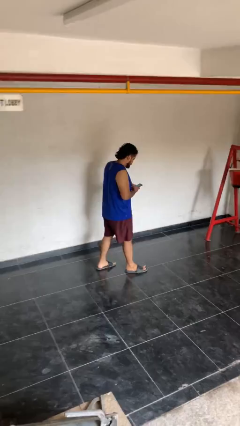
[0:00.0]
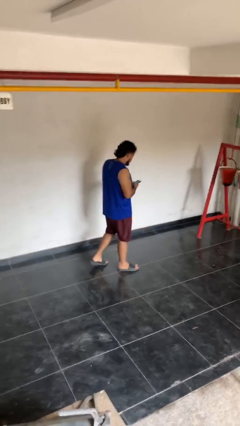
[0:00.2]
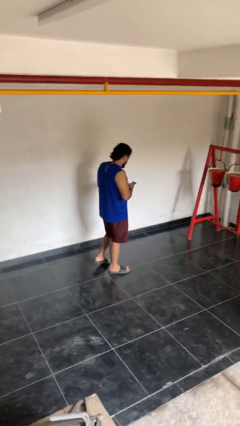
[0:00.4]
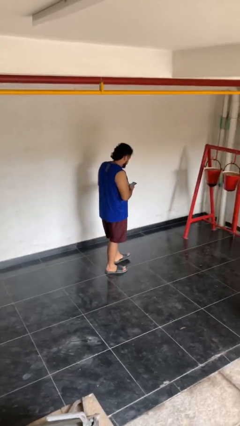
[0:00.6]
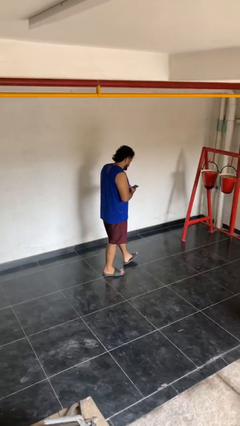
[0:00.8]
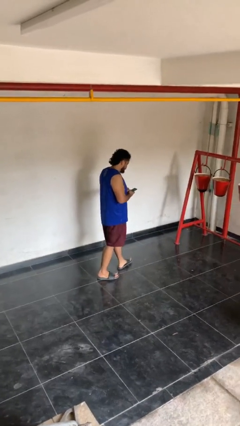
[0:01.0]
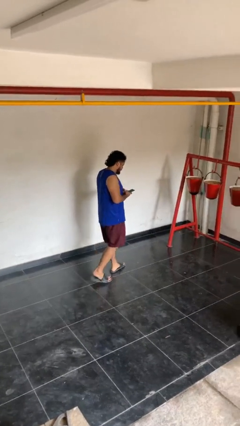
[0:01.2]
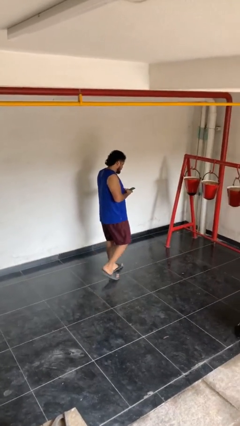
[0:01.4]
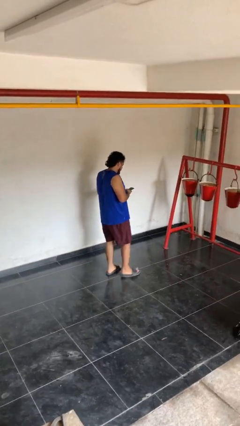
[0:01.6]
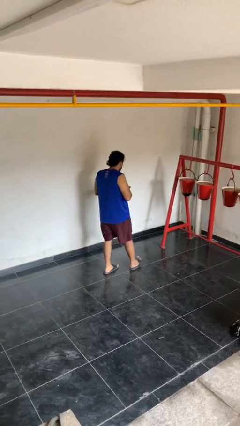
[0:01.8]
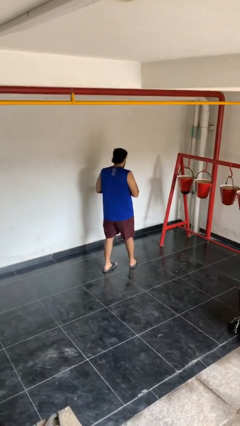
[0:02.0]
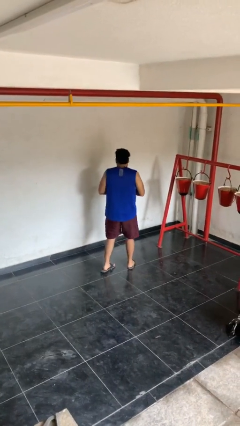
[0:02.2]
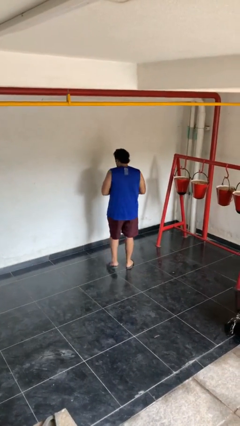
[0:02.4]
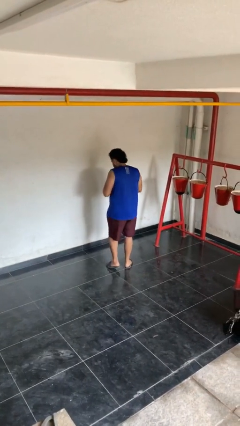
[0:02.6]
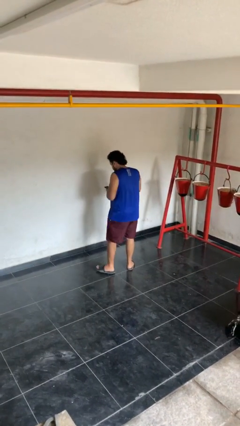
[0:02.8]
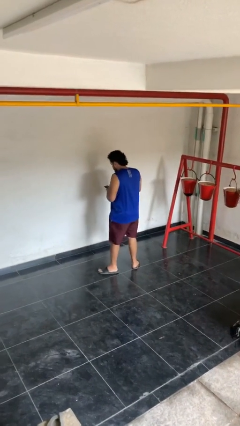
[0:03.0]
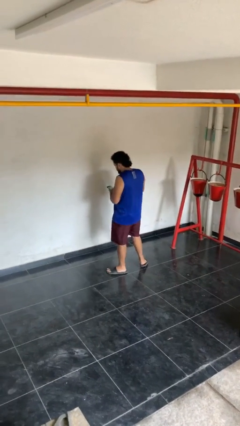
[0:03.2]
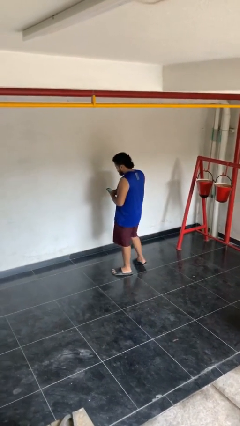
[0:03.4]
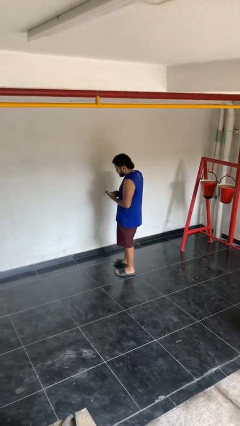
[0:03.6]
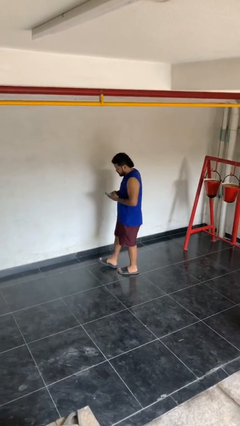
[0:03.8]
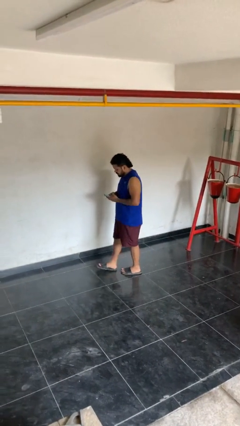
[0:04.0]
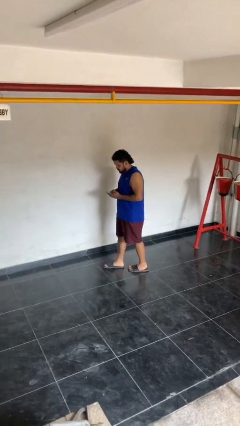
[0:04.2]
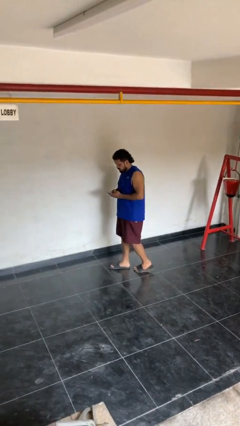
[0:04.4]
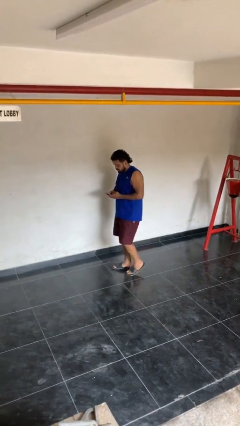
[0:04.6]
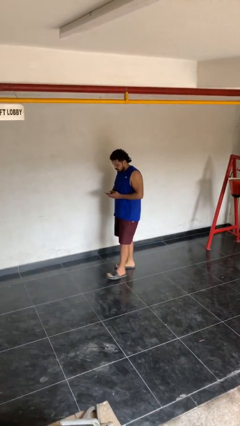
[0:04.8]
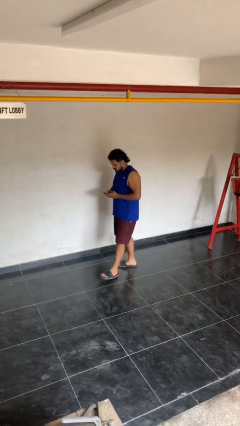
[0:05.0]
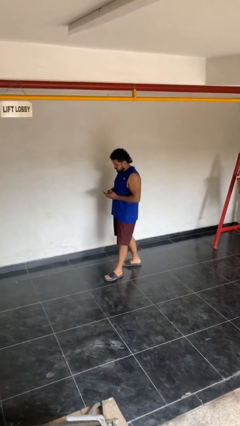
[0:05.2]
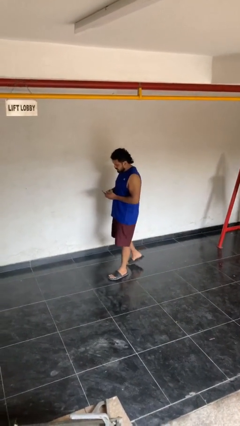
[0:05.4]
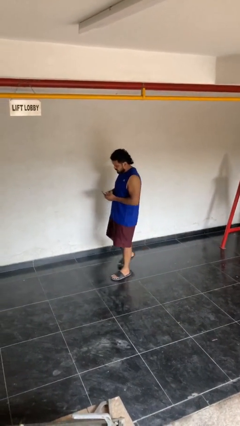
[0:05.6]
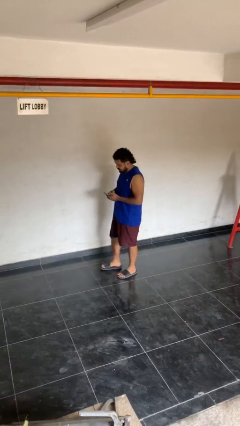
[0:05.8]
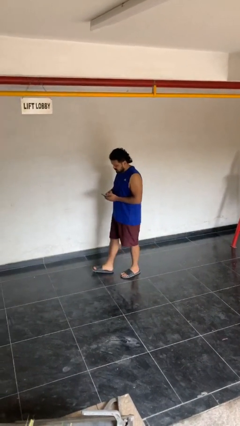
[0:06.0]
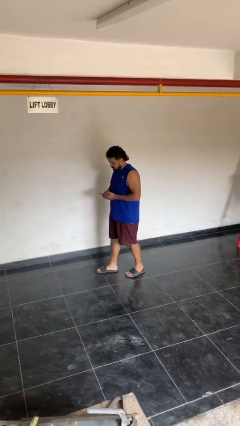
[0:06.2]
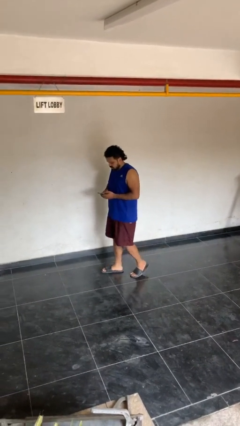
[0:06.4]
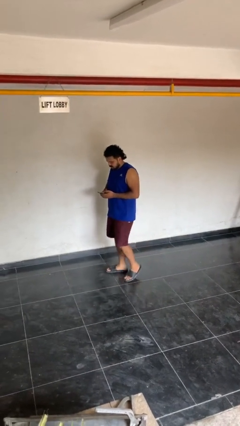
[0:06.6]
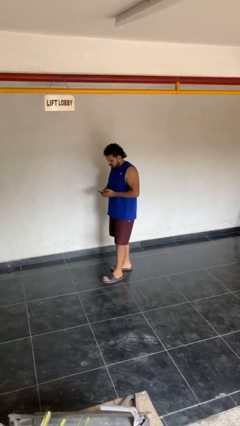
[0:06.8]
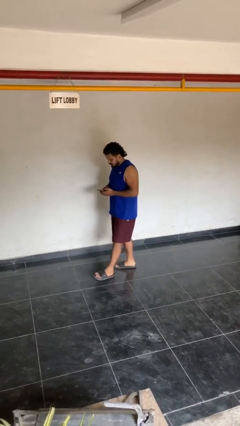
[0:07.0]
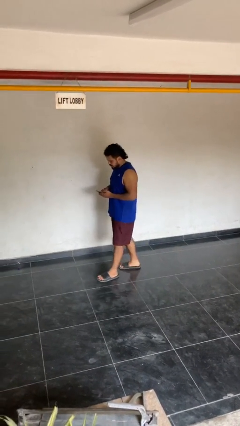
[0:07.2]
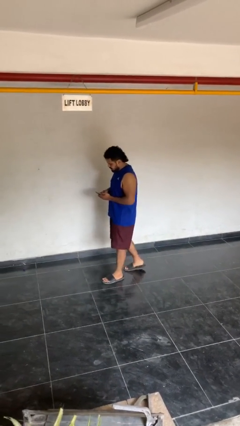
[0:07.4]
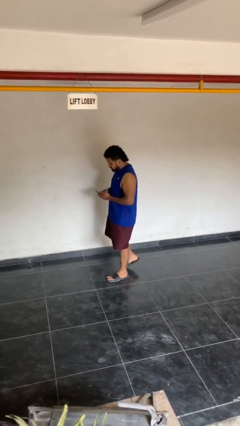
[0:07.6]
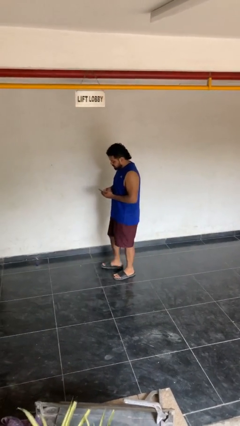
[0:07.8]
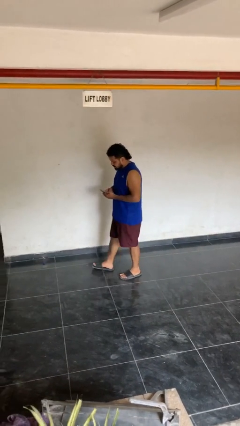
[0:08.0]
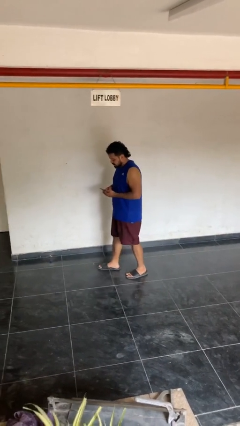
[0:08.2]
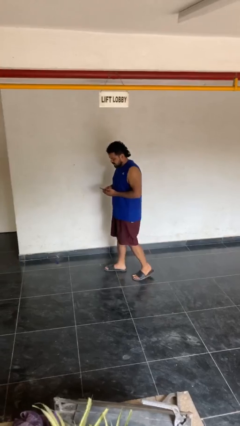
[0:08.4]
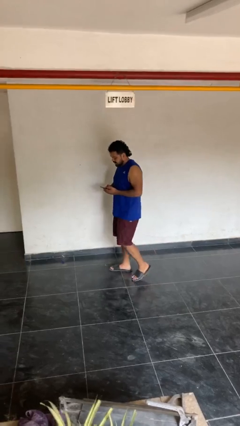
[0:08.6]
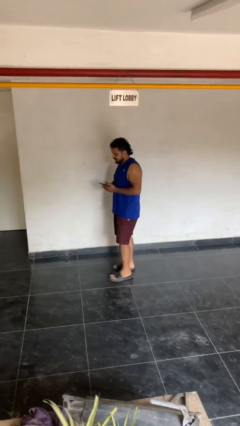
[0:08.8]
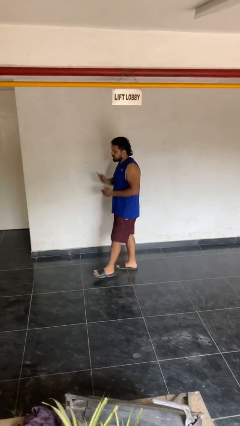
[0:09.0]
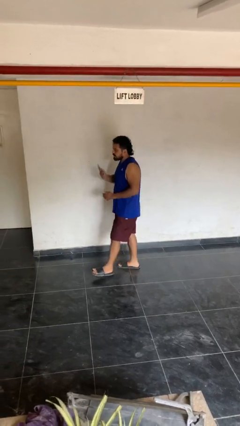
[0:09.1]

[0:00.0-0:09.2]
person texts on phone

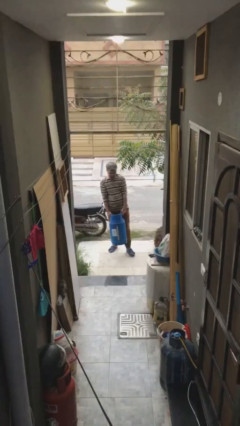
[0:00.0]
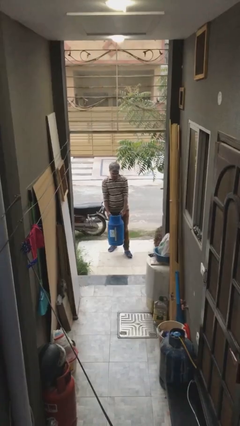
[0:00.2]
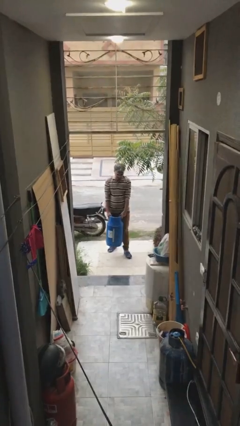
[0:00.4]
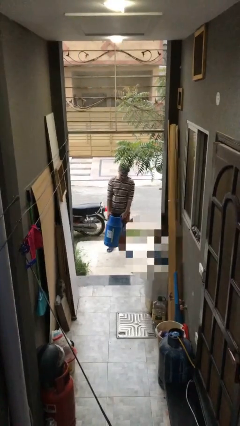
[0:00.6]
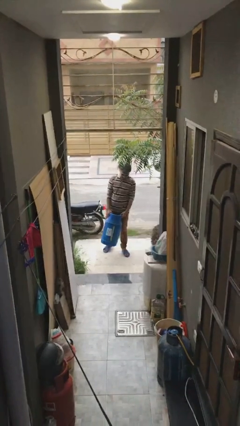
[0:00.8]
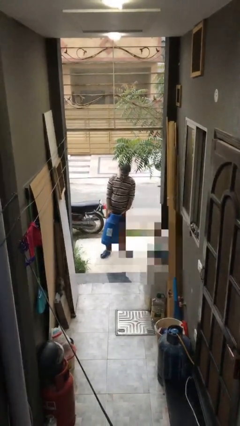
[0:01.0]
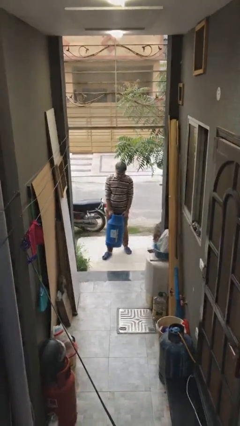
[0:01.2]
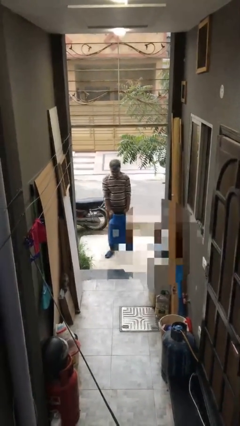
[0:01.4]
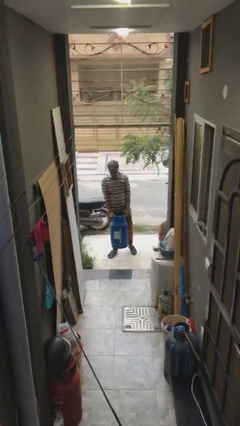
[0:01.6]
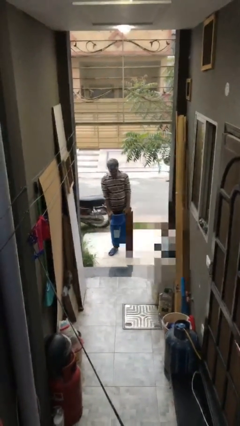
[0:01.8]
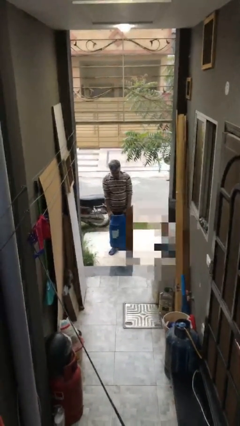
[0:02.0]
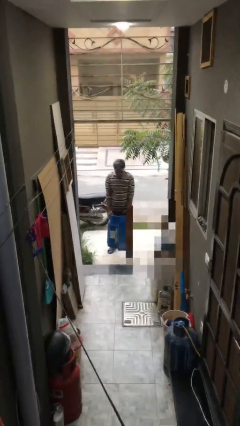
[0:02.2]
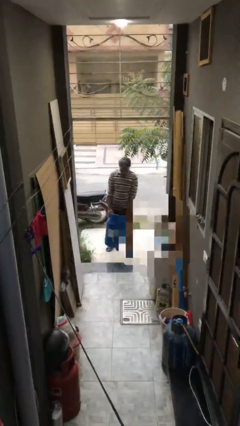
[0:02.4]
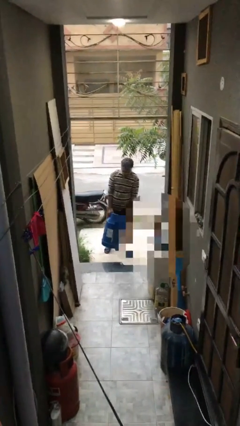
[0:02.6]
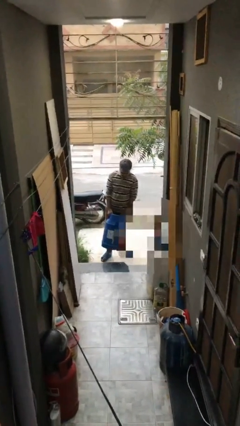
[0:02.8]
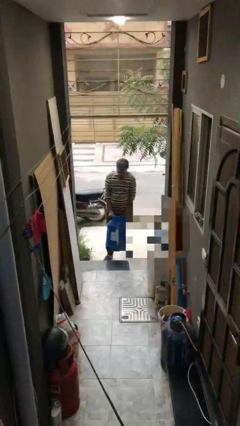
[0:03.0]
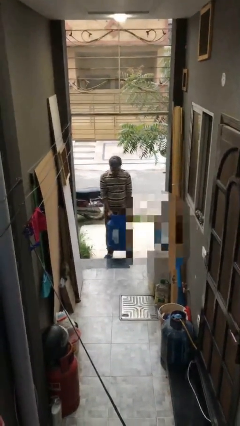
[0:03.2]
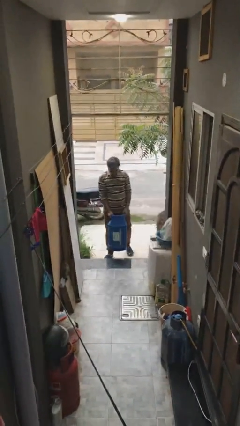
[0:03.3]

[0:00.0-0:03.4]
person carries heavy object

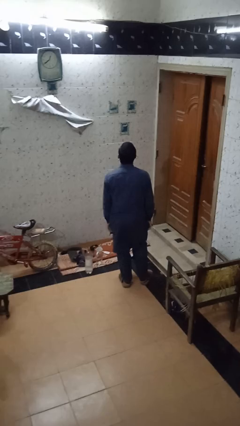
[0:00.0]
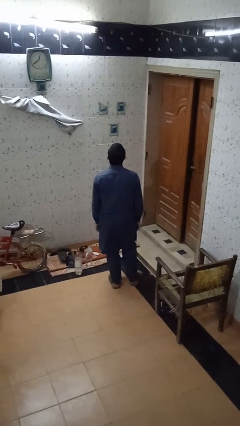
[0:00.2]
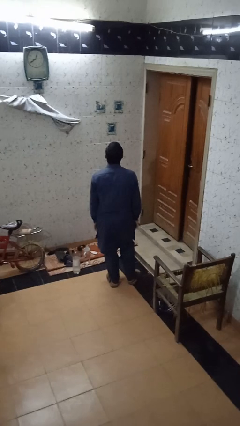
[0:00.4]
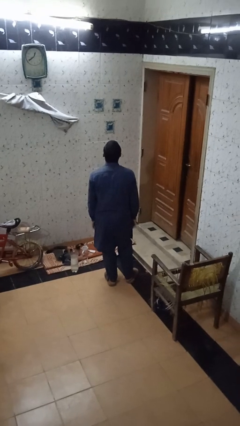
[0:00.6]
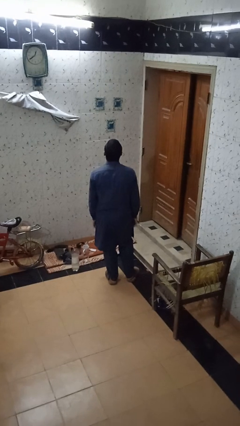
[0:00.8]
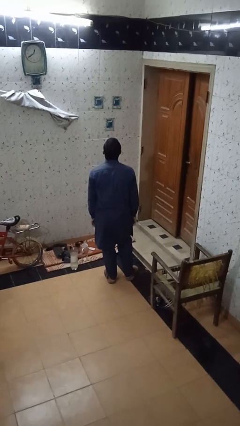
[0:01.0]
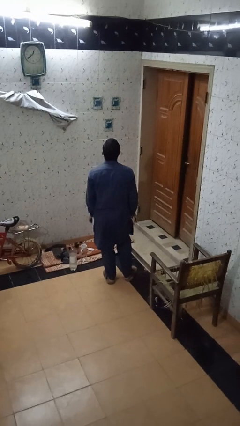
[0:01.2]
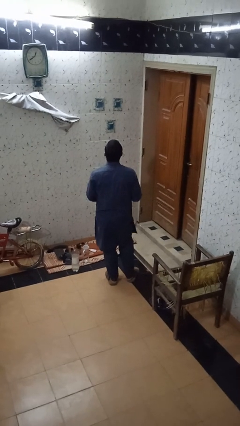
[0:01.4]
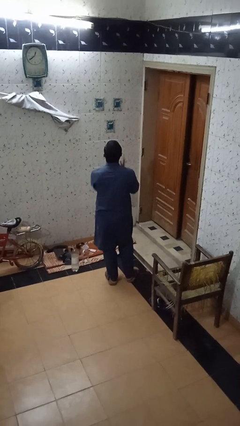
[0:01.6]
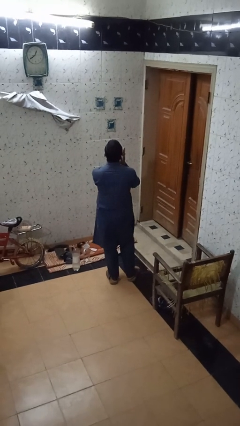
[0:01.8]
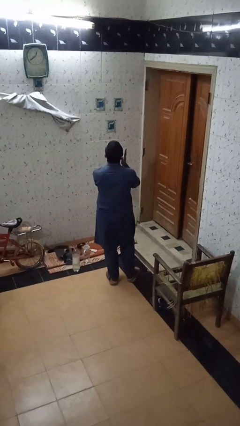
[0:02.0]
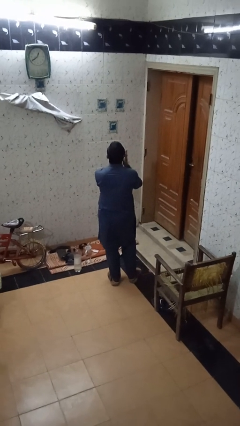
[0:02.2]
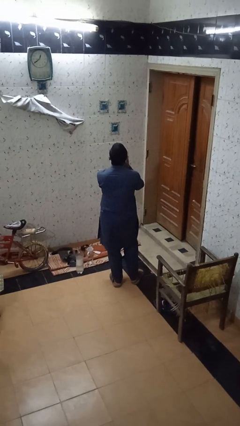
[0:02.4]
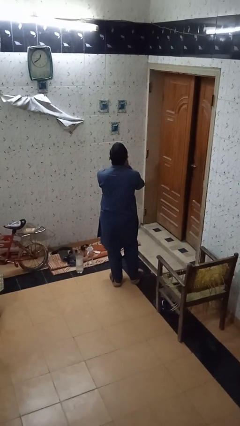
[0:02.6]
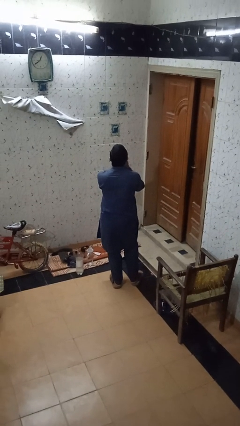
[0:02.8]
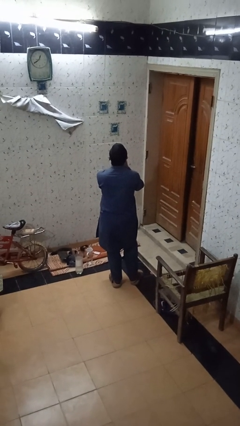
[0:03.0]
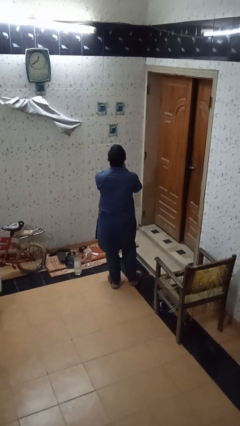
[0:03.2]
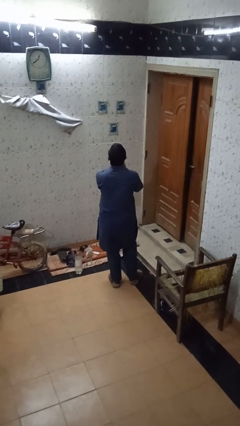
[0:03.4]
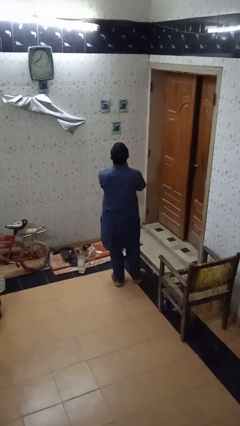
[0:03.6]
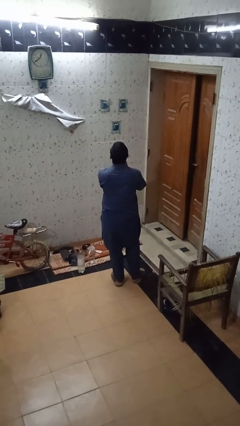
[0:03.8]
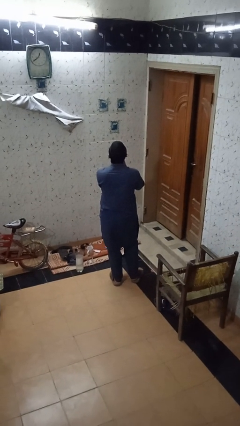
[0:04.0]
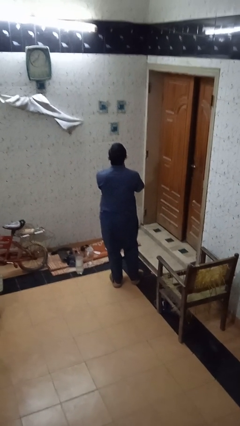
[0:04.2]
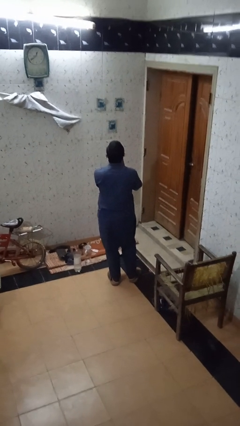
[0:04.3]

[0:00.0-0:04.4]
person claps hands

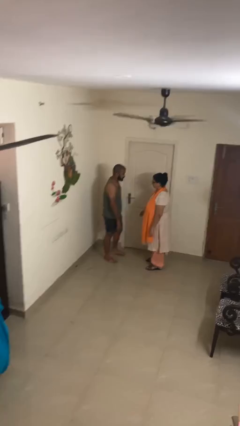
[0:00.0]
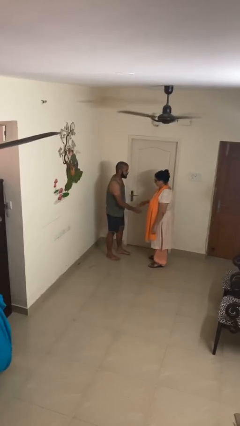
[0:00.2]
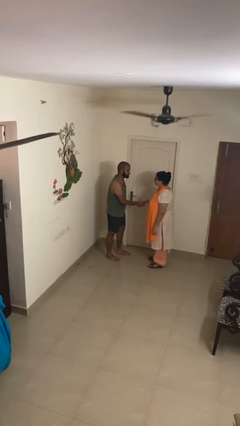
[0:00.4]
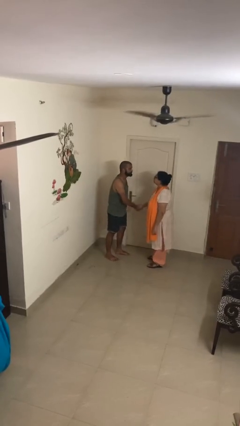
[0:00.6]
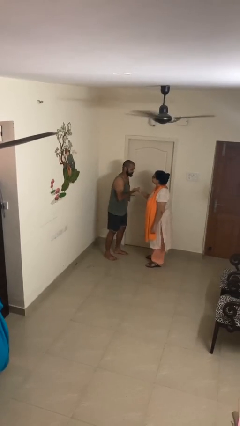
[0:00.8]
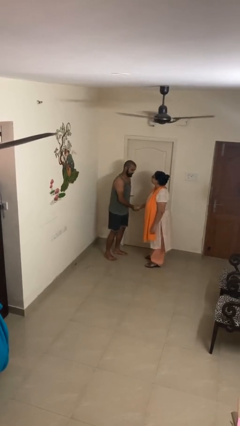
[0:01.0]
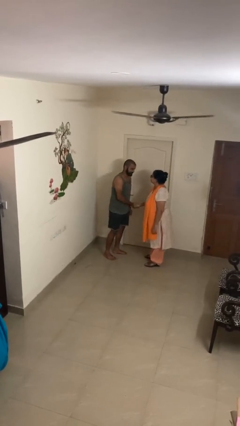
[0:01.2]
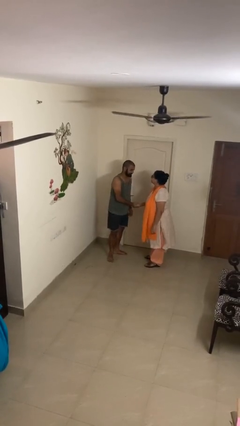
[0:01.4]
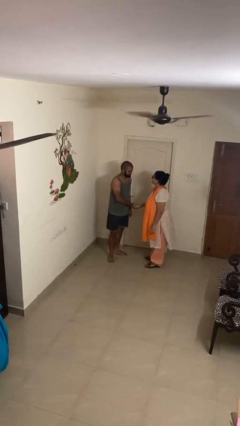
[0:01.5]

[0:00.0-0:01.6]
person shakes hand
